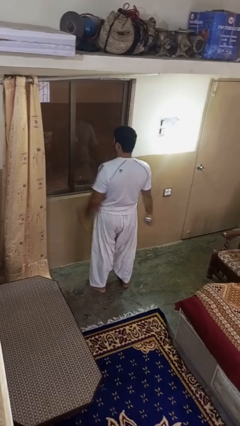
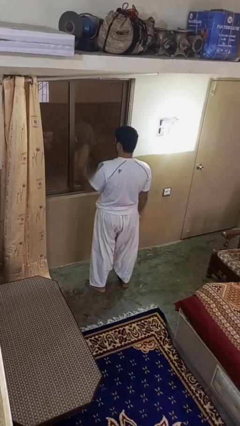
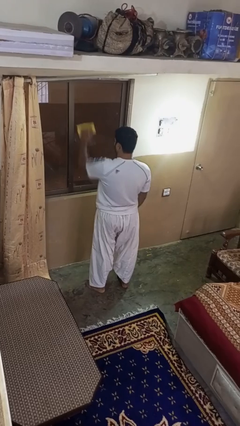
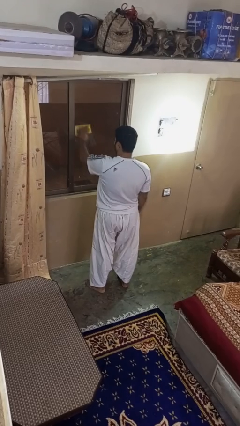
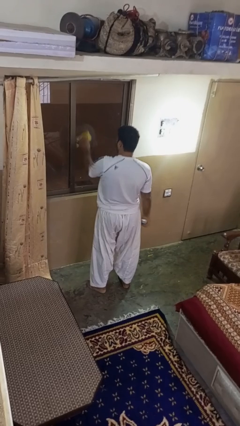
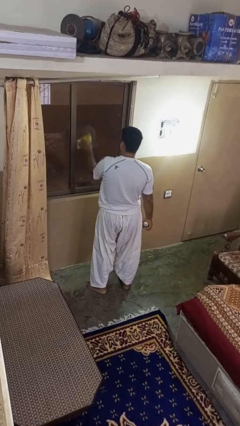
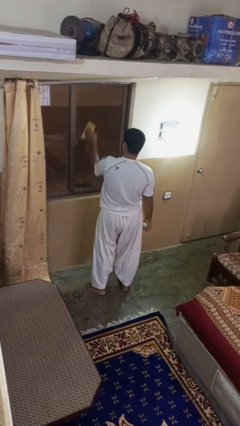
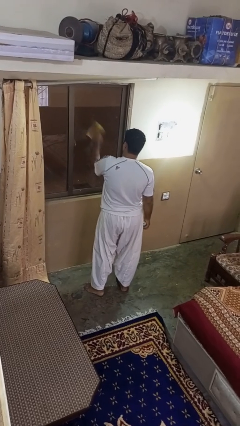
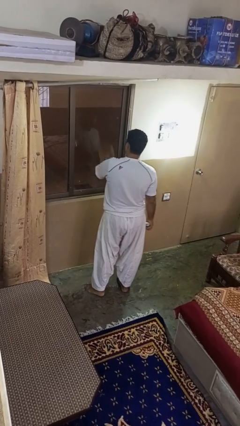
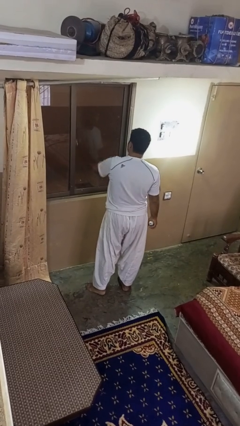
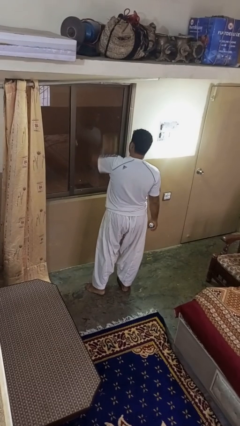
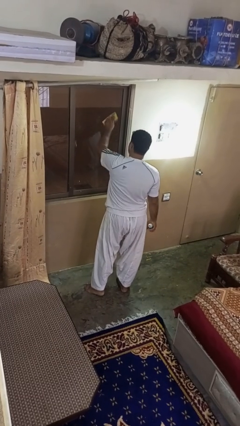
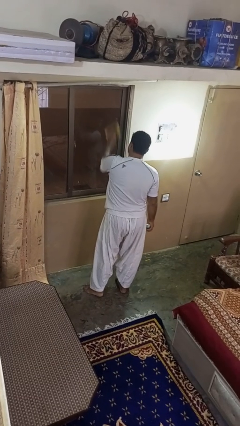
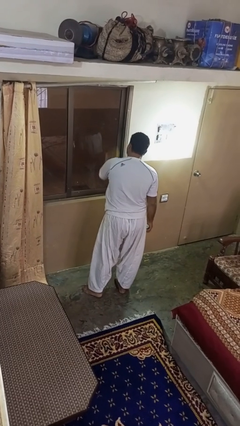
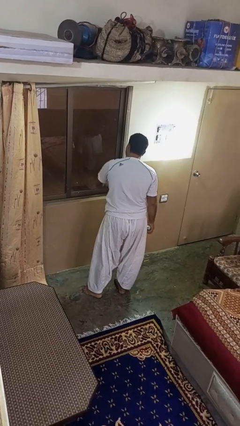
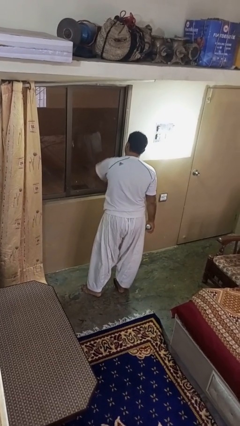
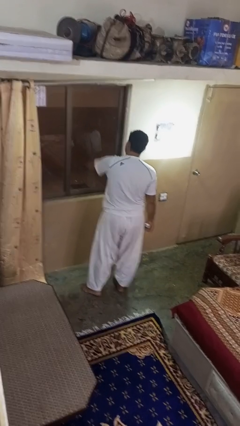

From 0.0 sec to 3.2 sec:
person washes window

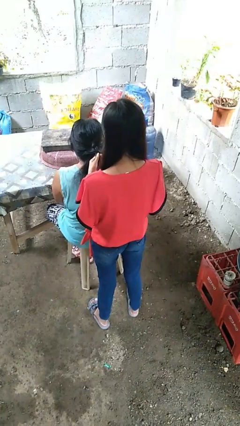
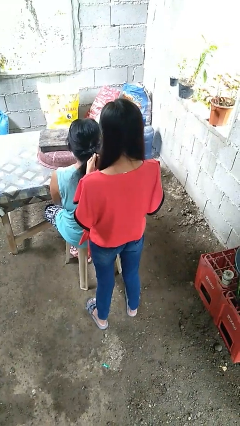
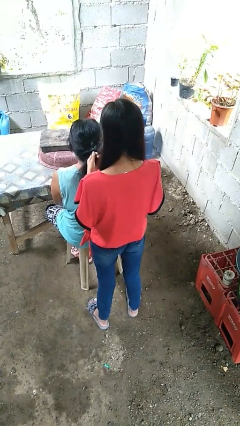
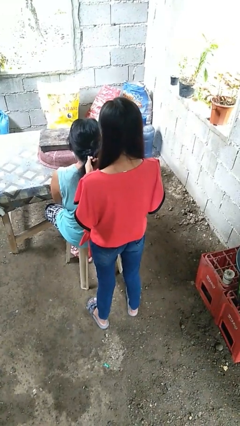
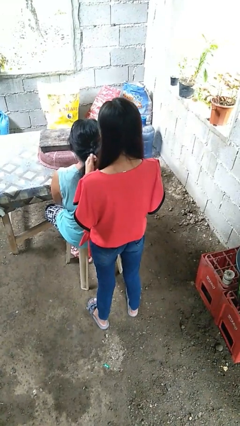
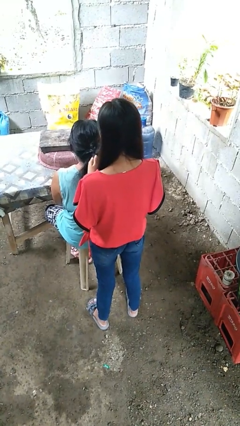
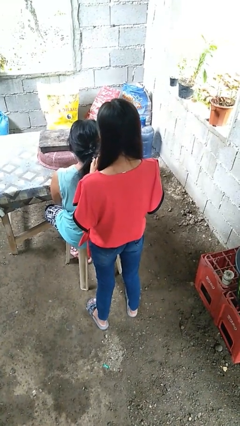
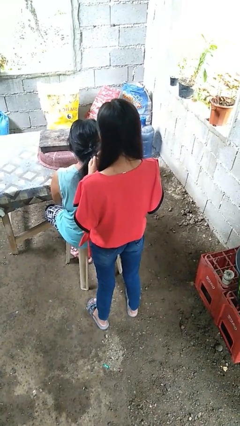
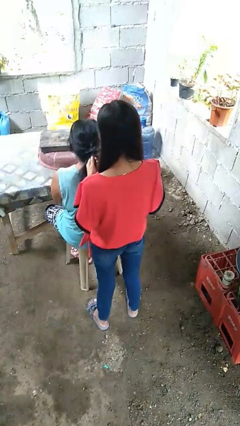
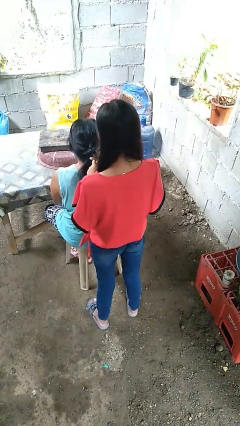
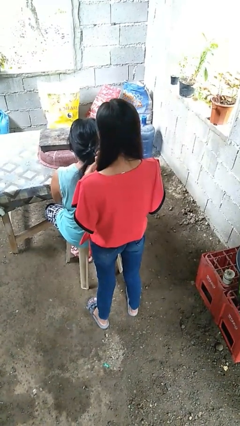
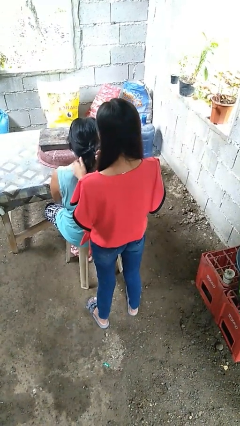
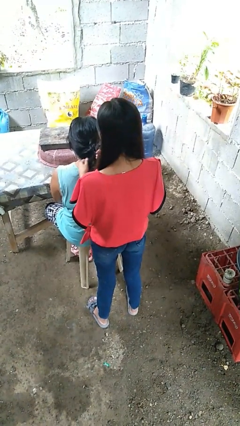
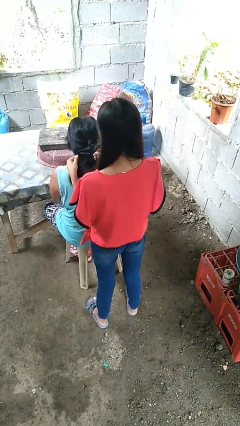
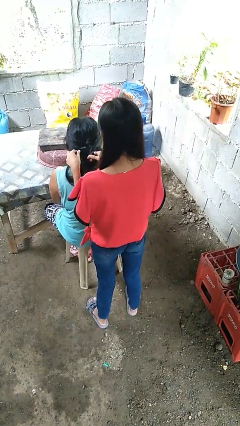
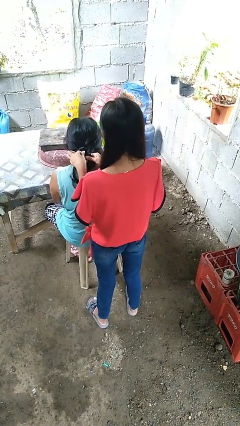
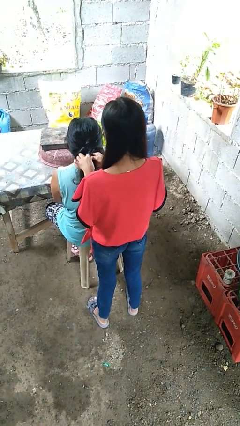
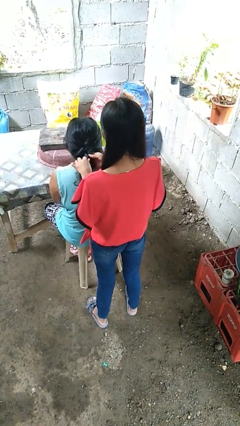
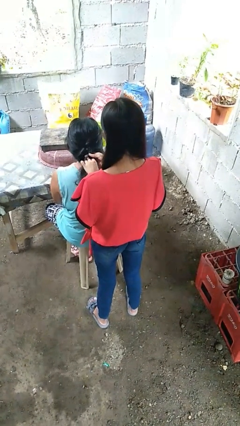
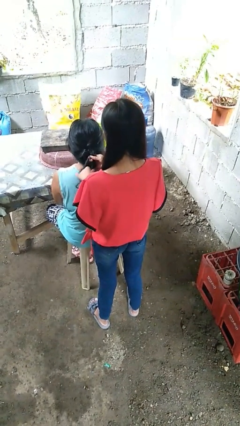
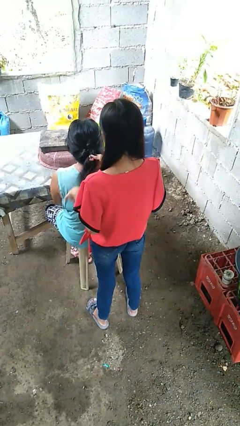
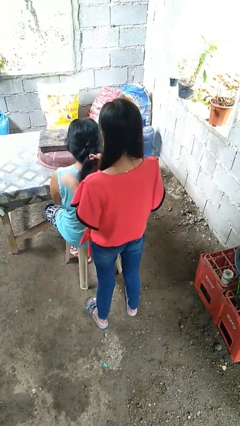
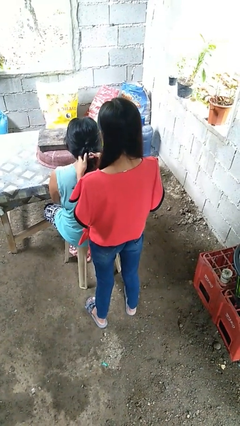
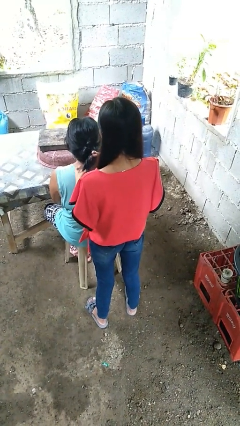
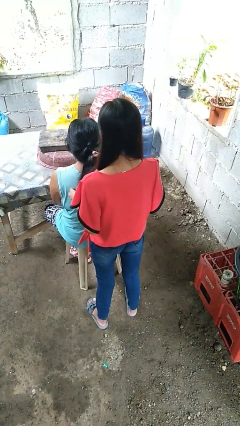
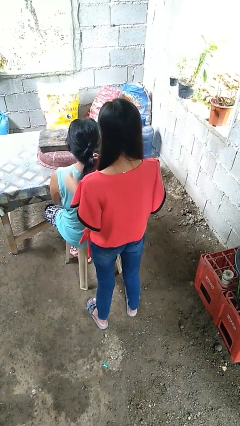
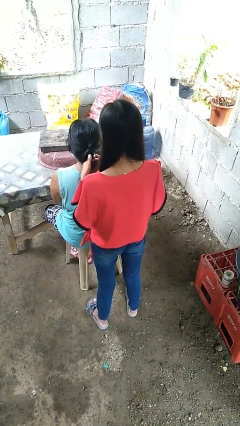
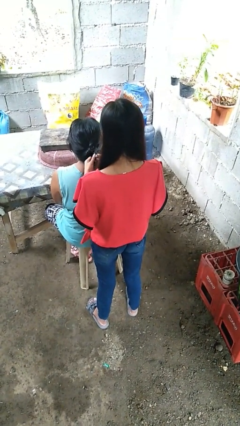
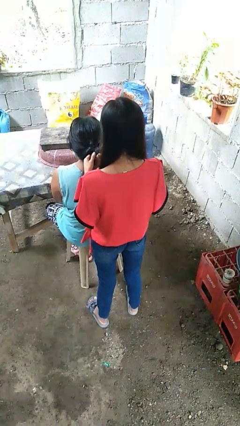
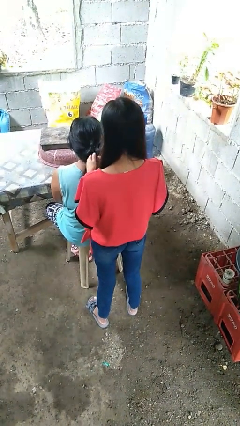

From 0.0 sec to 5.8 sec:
person braids hair of person

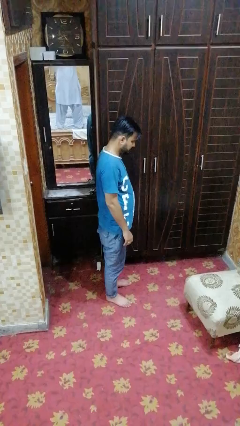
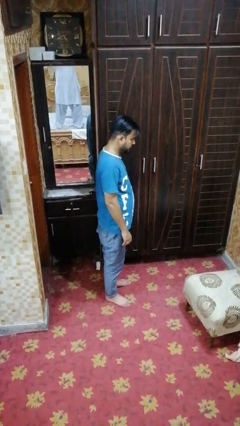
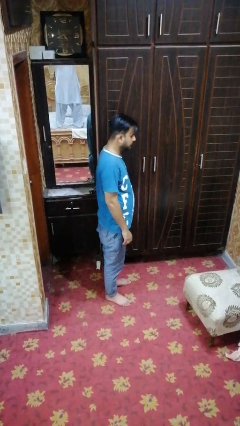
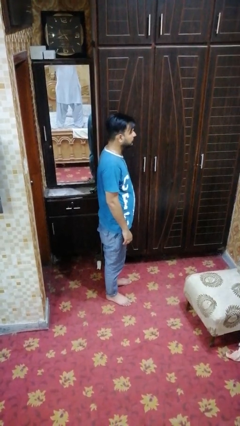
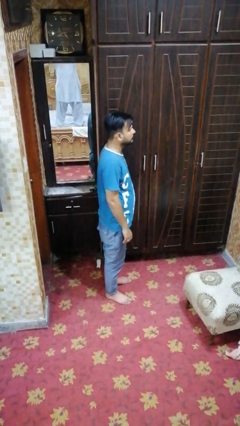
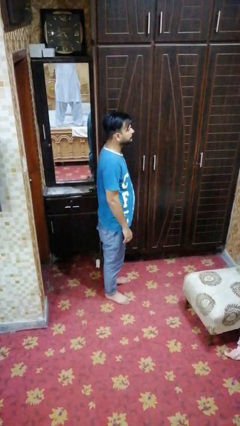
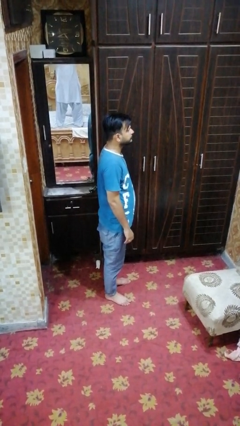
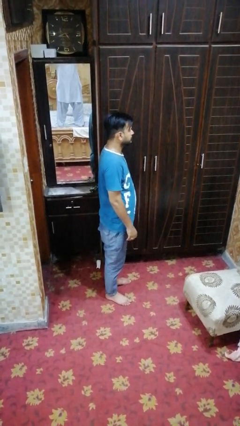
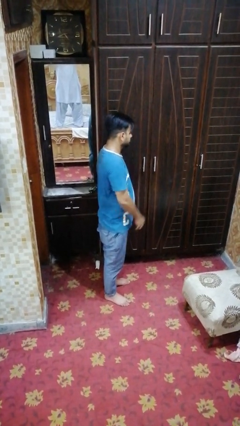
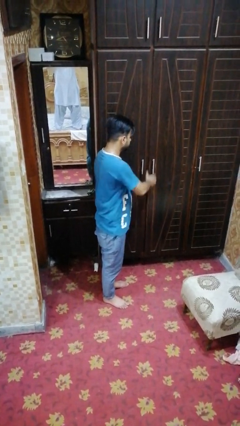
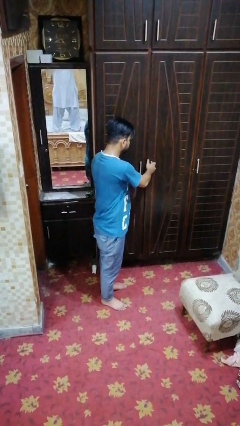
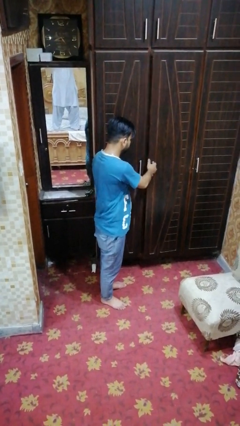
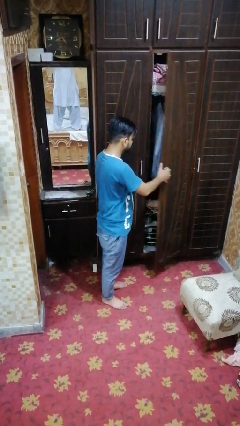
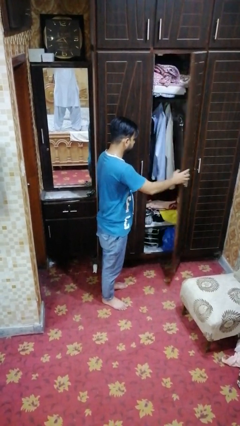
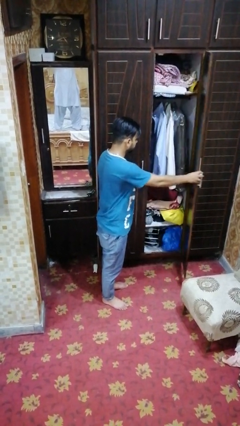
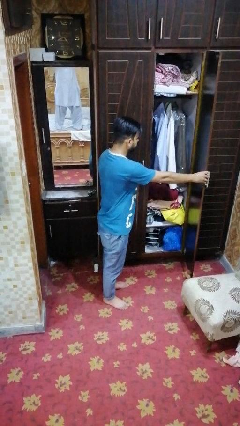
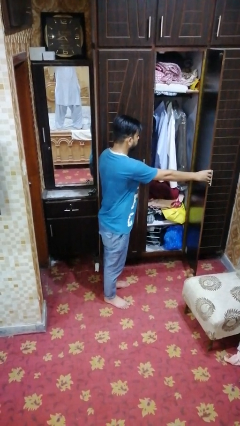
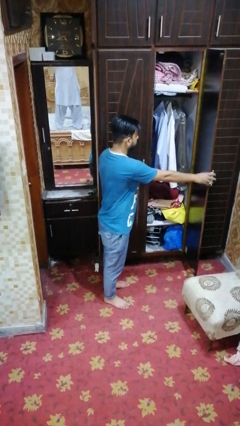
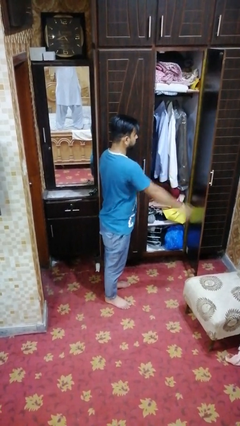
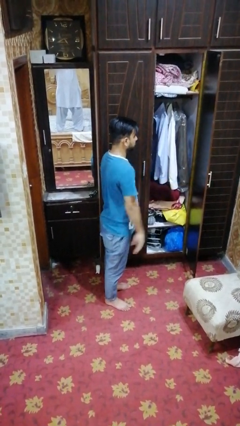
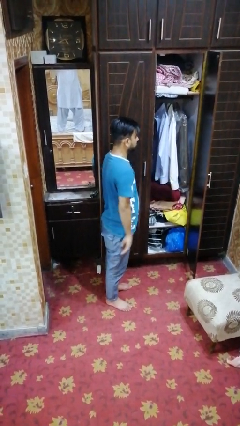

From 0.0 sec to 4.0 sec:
person opens closet door

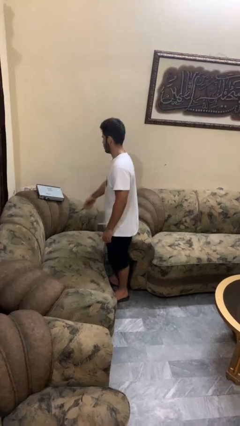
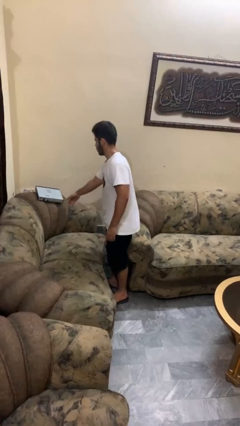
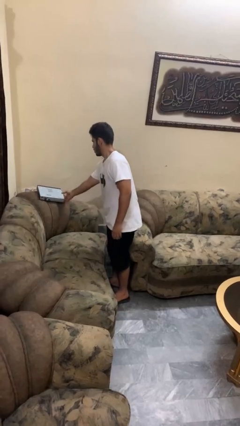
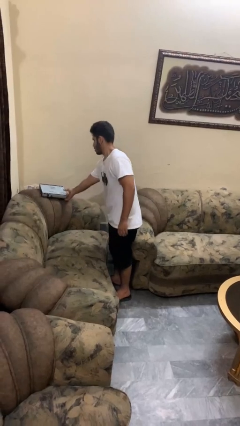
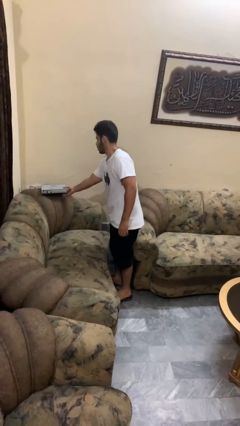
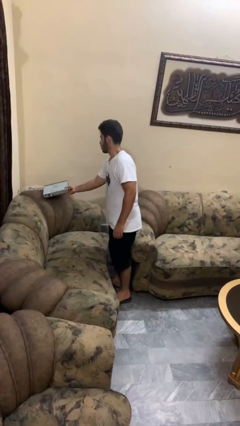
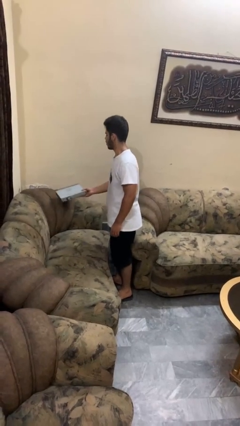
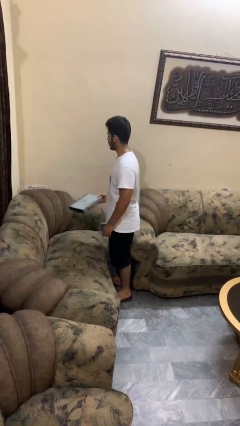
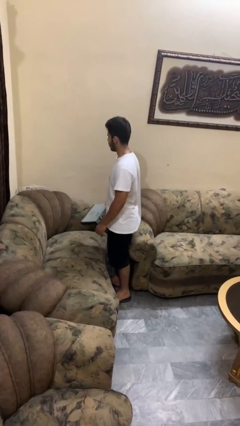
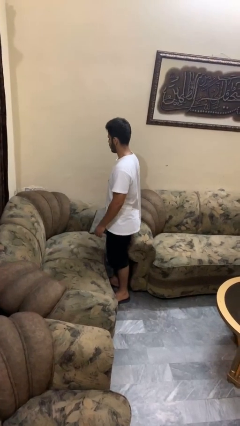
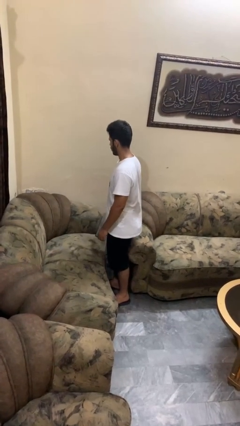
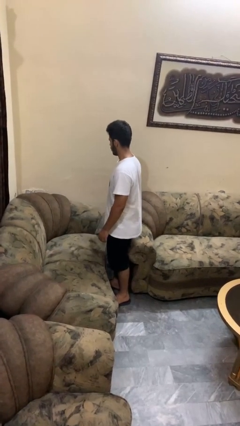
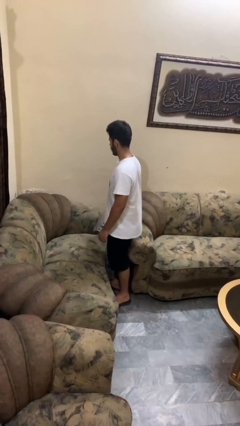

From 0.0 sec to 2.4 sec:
person picks up object from couch

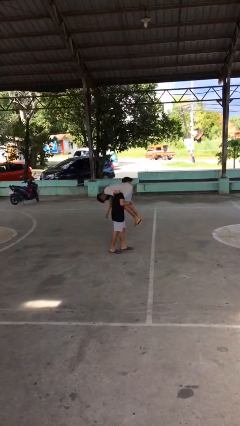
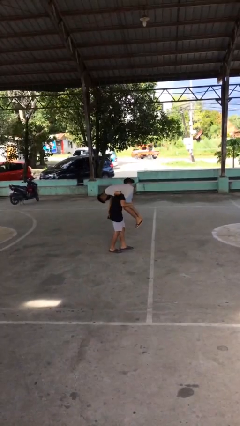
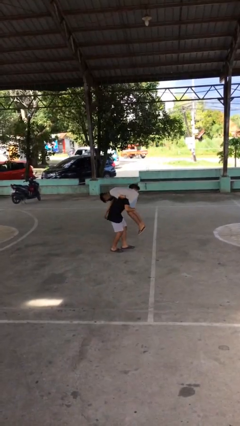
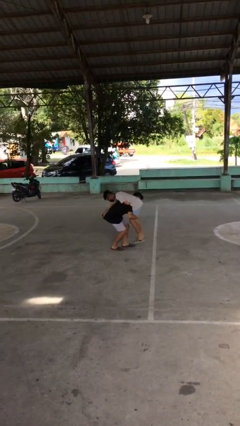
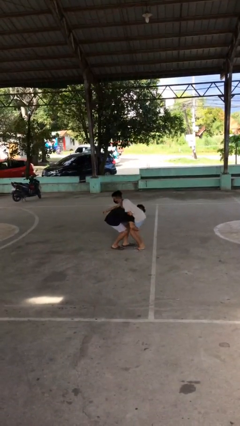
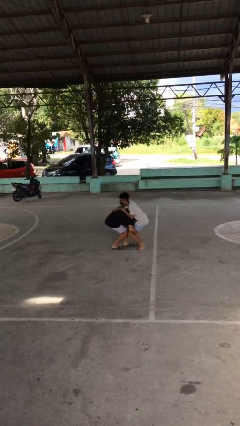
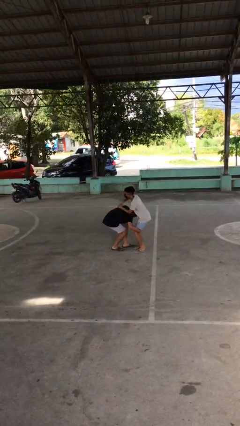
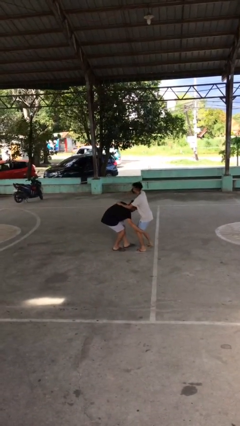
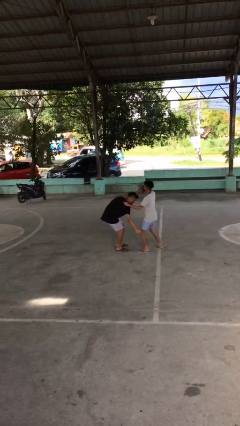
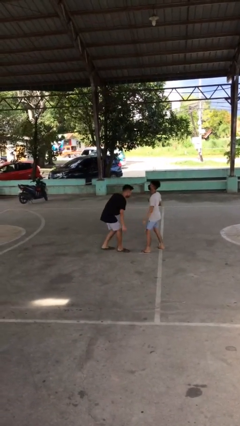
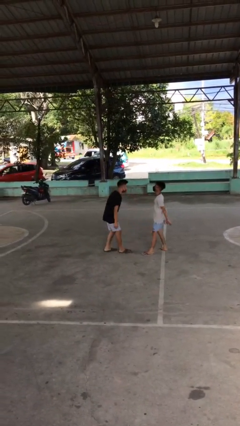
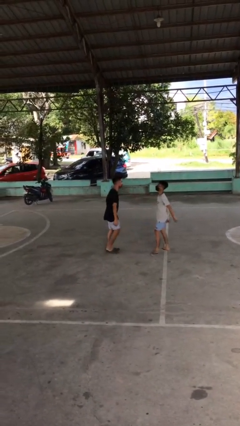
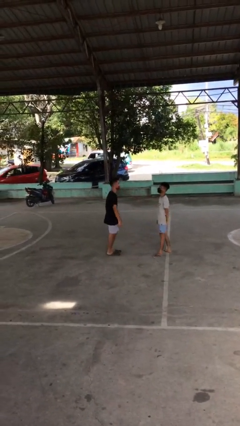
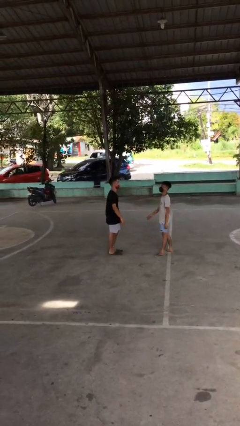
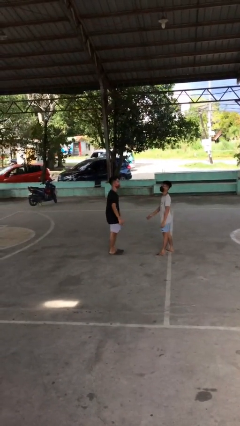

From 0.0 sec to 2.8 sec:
person puts down person
